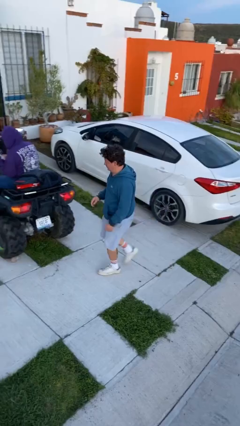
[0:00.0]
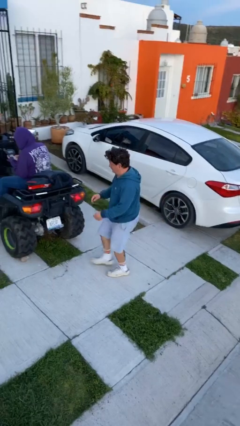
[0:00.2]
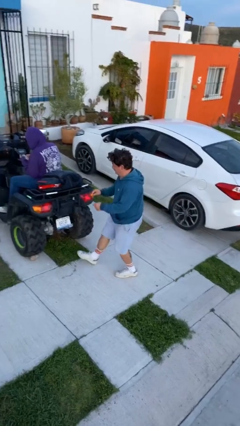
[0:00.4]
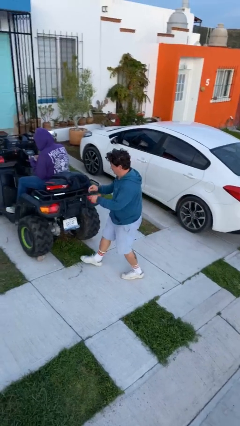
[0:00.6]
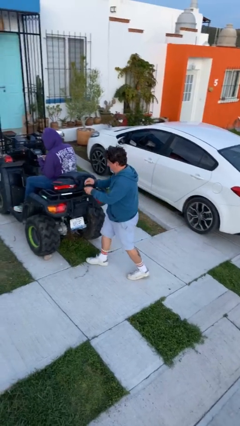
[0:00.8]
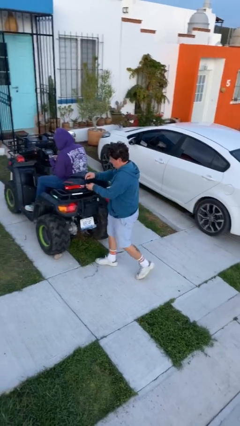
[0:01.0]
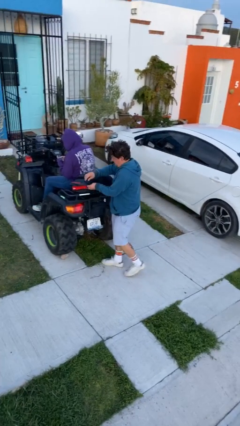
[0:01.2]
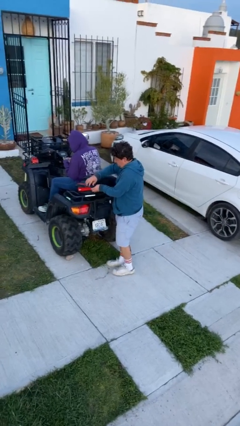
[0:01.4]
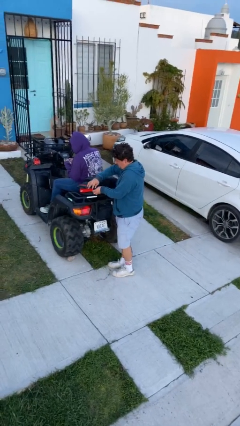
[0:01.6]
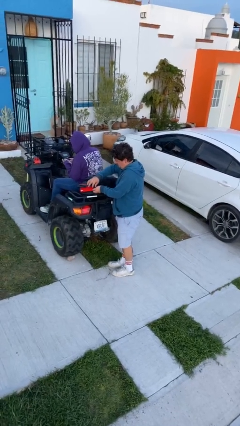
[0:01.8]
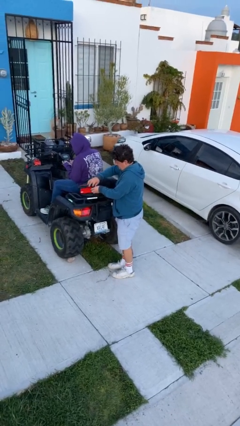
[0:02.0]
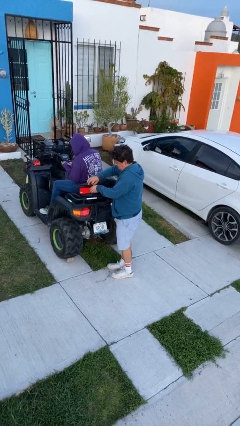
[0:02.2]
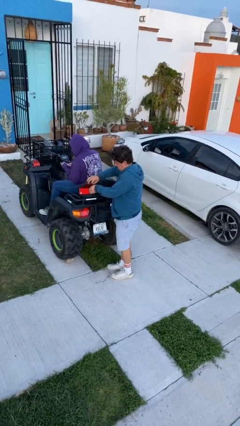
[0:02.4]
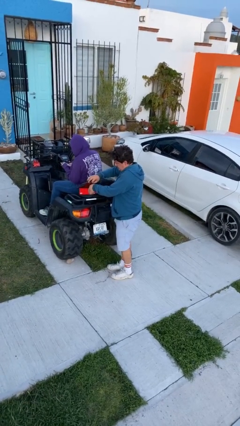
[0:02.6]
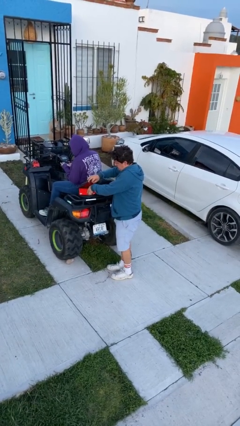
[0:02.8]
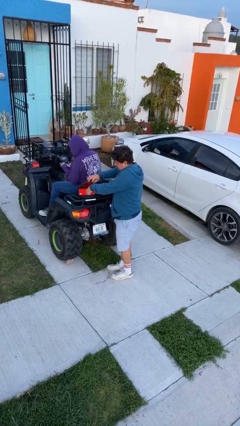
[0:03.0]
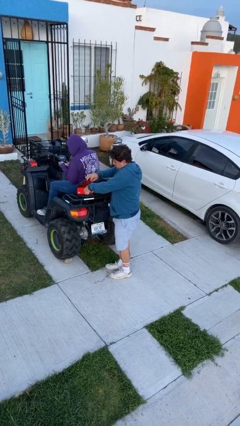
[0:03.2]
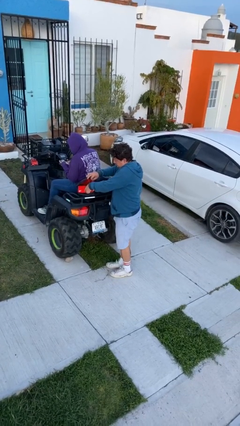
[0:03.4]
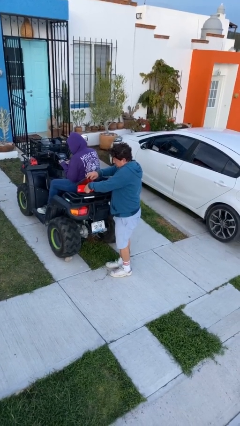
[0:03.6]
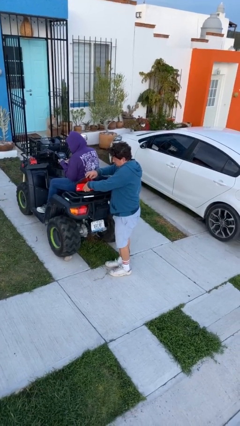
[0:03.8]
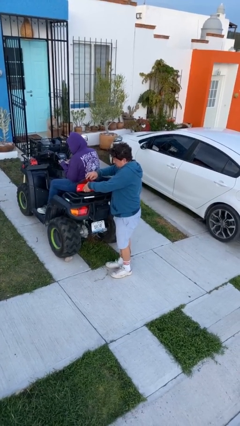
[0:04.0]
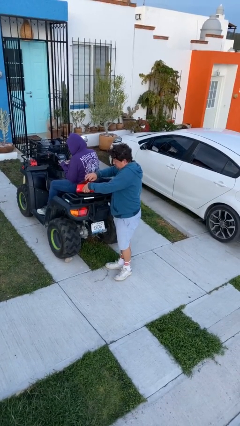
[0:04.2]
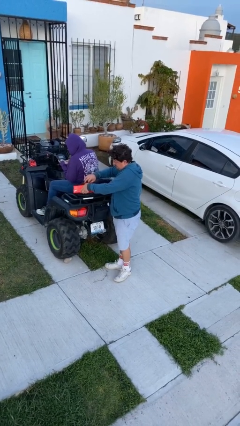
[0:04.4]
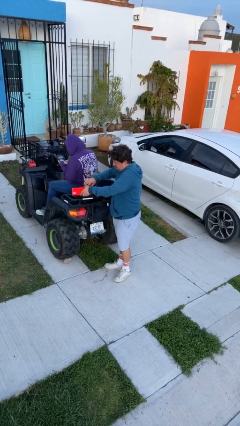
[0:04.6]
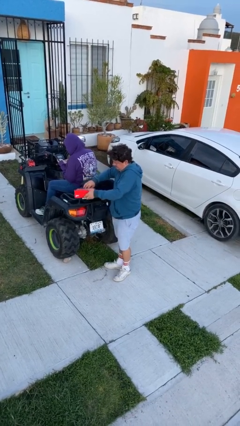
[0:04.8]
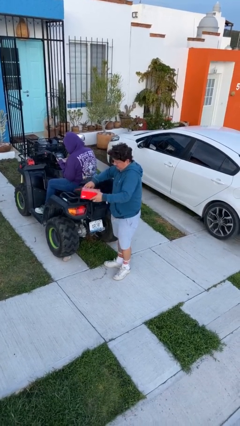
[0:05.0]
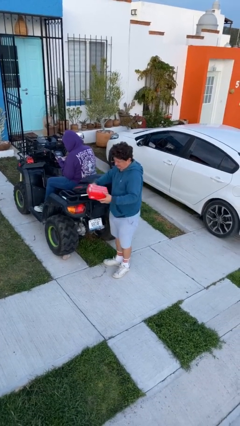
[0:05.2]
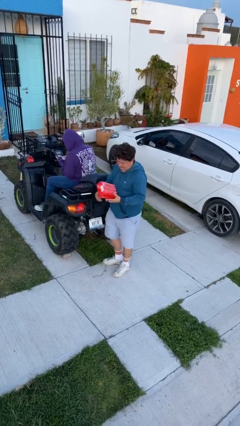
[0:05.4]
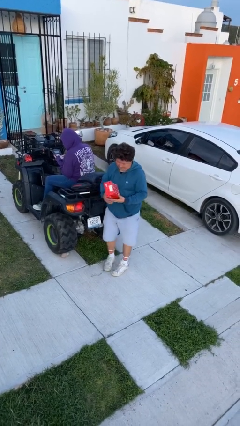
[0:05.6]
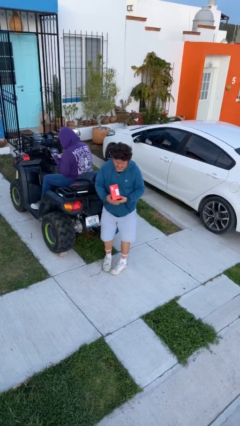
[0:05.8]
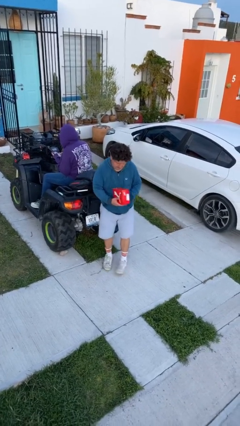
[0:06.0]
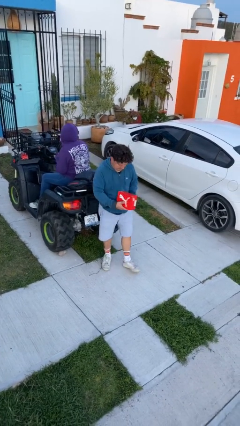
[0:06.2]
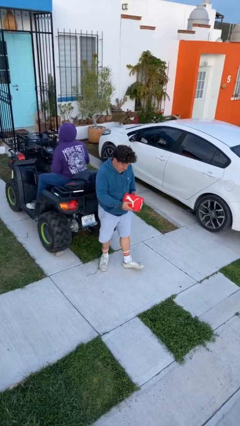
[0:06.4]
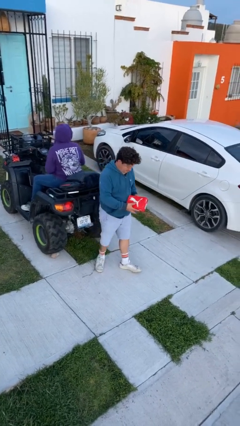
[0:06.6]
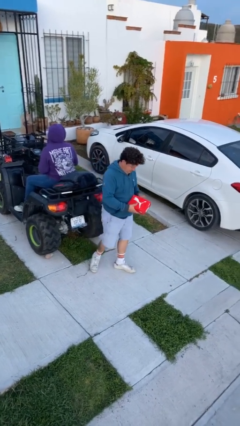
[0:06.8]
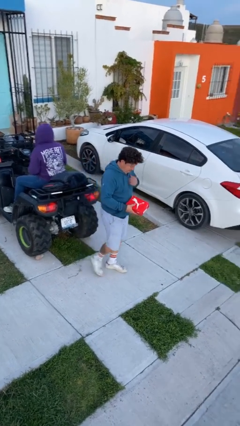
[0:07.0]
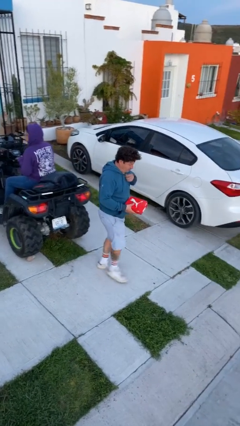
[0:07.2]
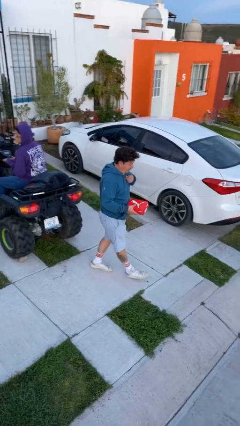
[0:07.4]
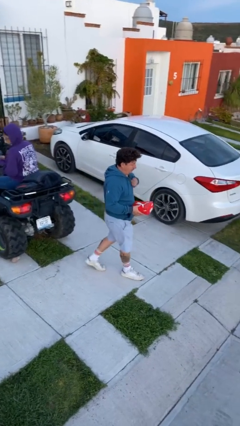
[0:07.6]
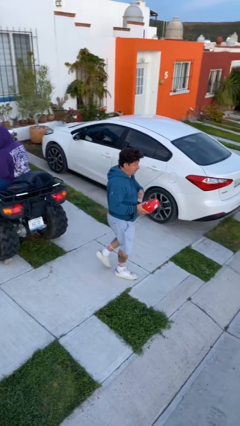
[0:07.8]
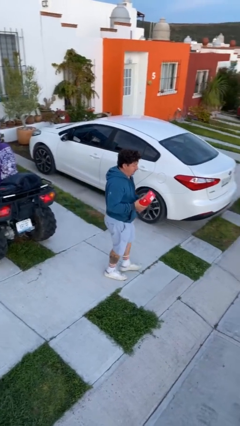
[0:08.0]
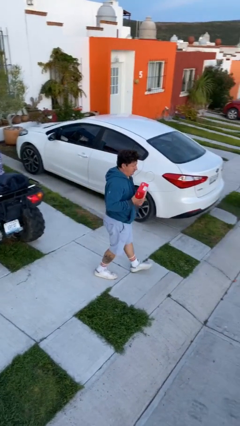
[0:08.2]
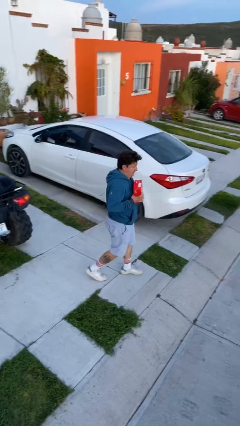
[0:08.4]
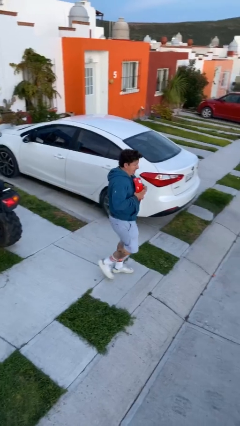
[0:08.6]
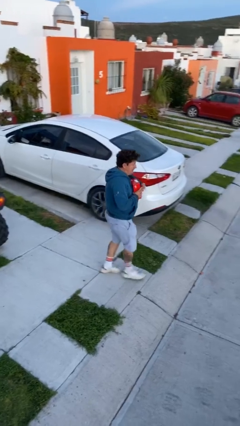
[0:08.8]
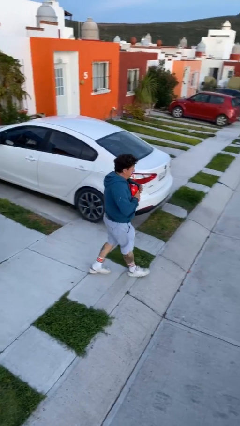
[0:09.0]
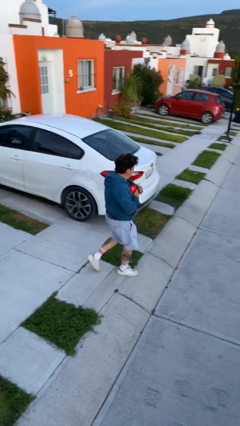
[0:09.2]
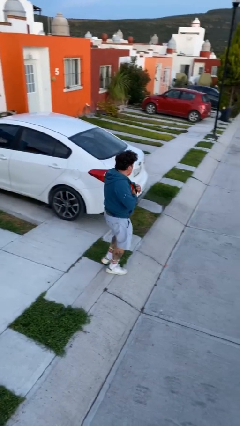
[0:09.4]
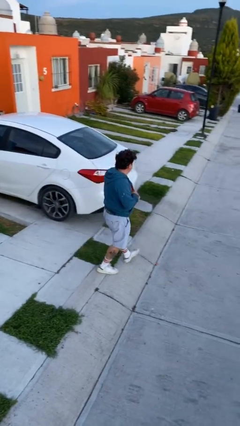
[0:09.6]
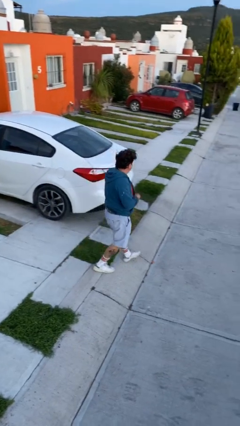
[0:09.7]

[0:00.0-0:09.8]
person steals object from person

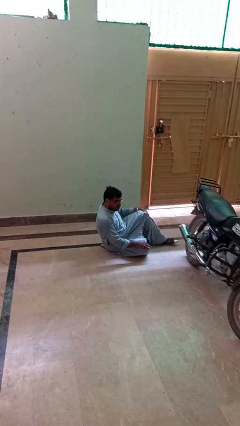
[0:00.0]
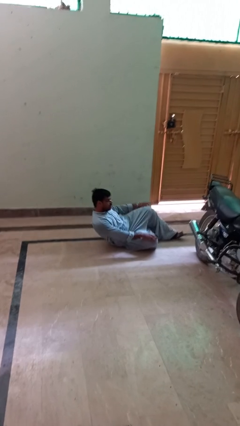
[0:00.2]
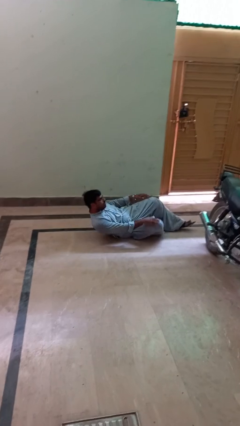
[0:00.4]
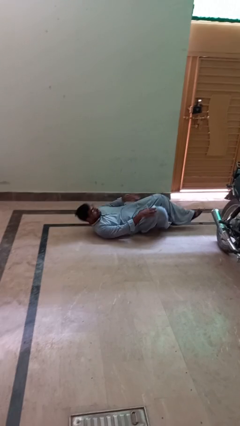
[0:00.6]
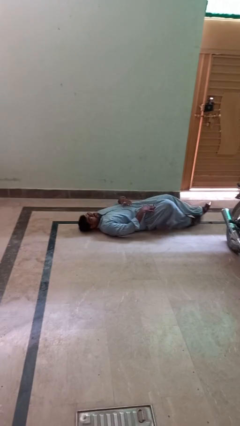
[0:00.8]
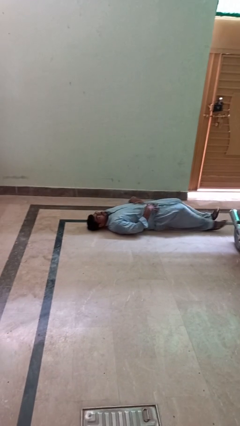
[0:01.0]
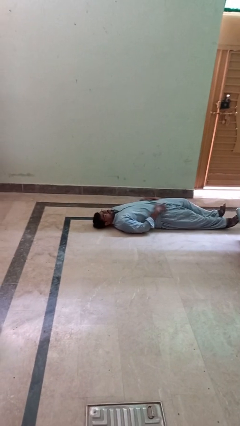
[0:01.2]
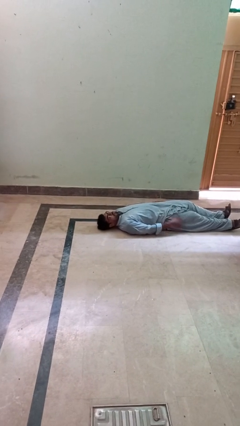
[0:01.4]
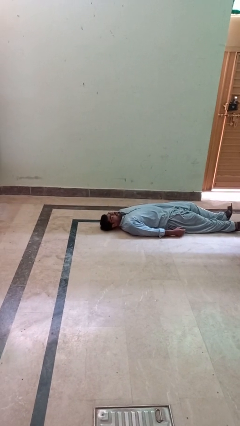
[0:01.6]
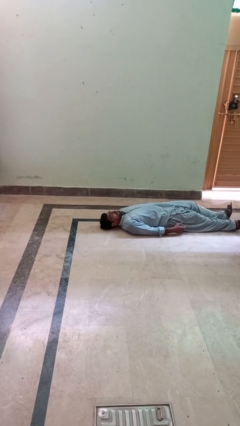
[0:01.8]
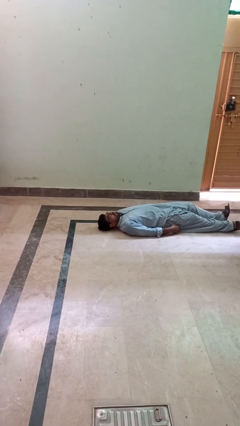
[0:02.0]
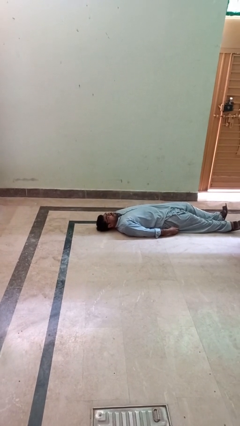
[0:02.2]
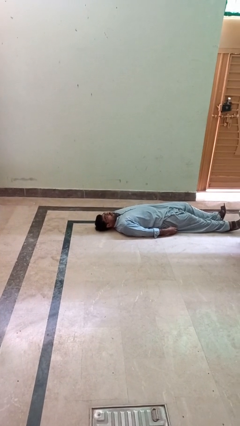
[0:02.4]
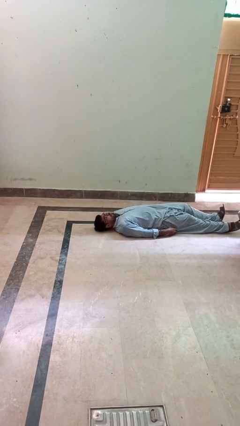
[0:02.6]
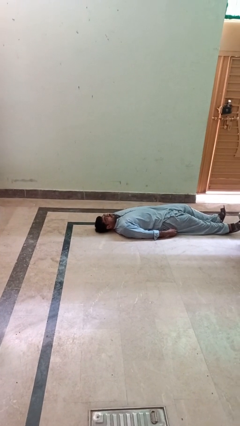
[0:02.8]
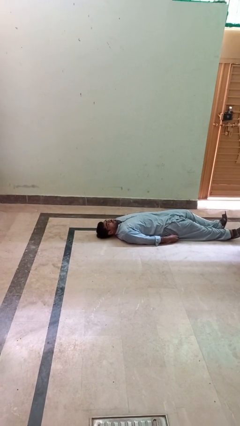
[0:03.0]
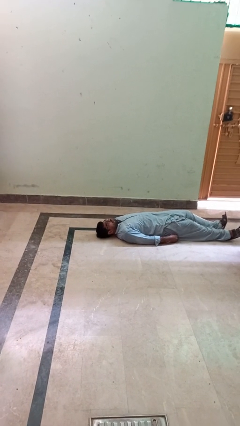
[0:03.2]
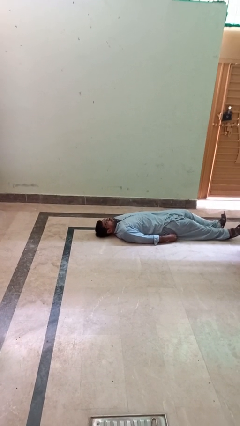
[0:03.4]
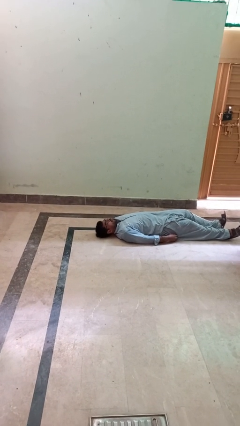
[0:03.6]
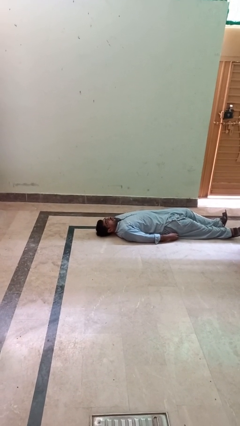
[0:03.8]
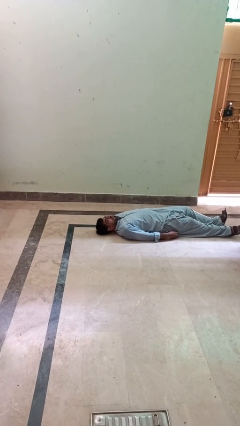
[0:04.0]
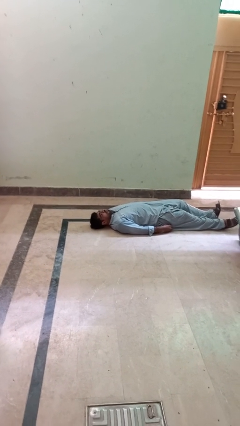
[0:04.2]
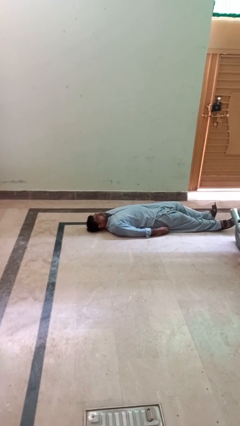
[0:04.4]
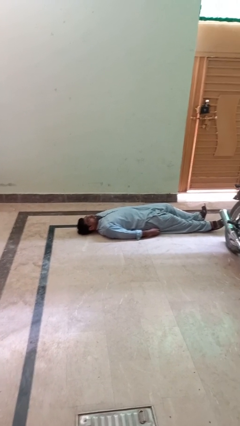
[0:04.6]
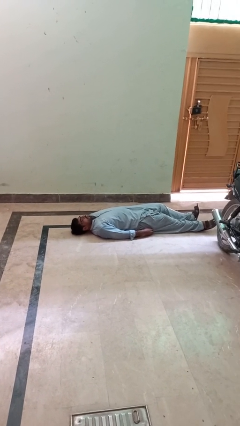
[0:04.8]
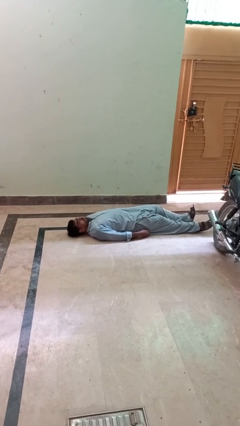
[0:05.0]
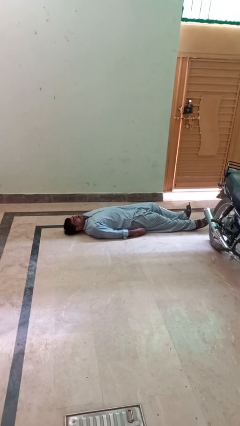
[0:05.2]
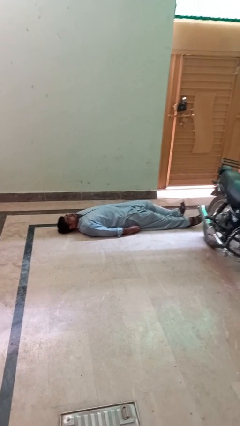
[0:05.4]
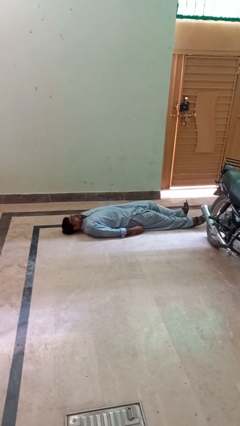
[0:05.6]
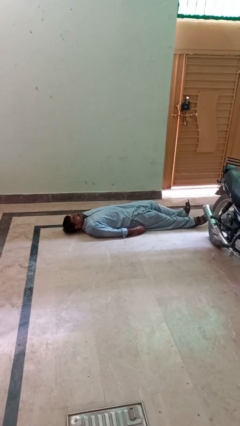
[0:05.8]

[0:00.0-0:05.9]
person lies down on floor

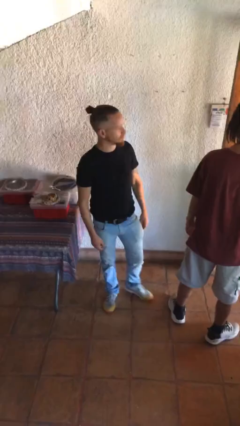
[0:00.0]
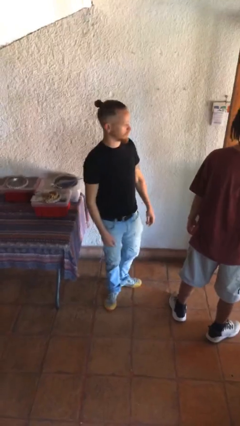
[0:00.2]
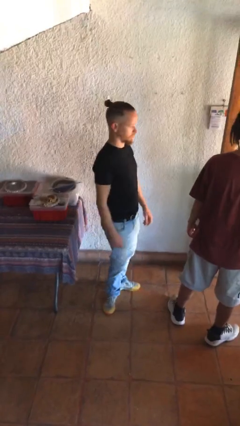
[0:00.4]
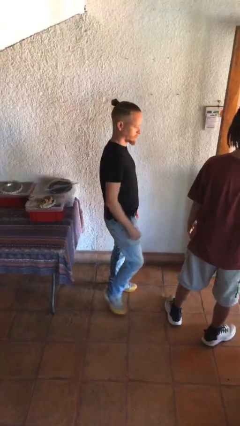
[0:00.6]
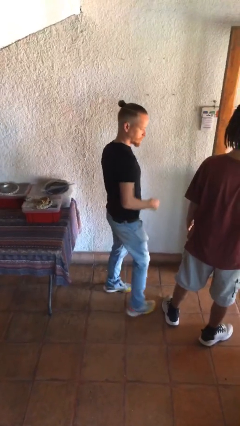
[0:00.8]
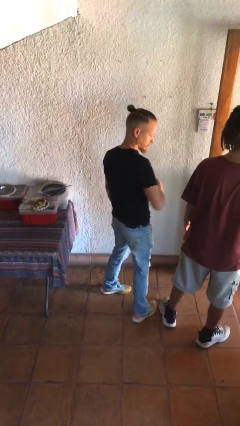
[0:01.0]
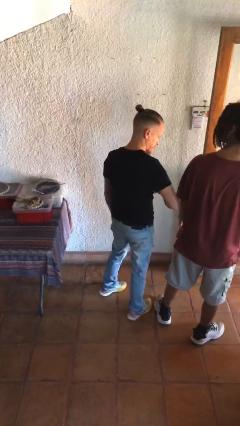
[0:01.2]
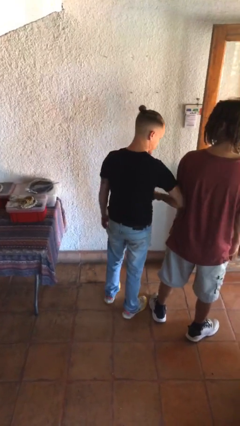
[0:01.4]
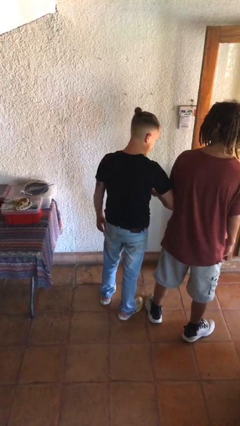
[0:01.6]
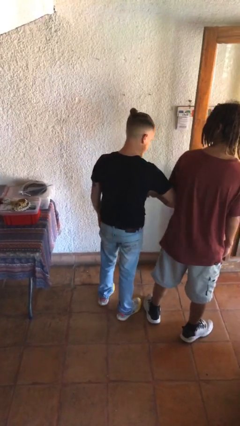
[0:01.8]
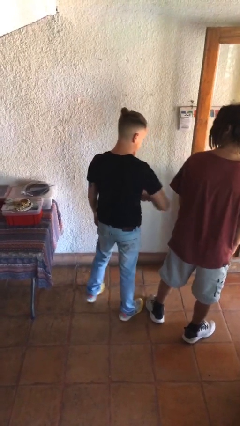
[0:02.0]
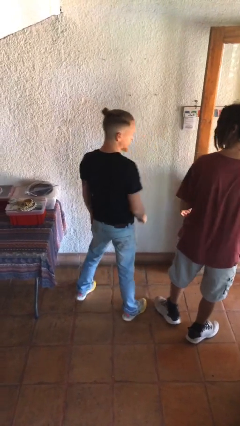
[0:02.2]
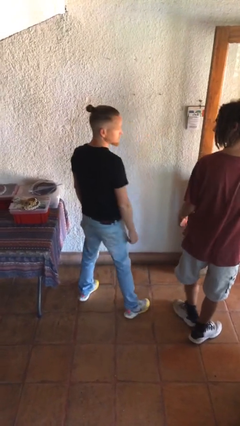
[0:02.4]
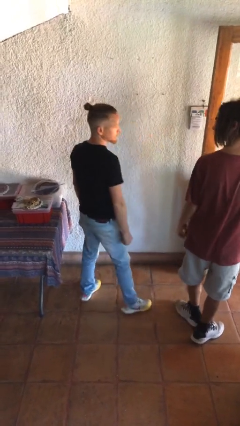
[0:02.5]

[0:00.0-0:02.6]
person nudges person with elbow
